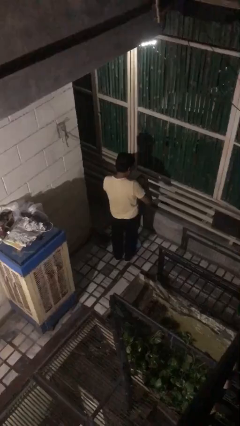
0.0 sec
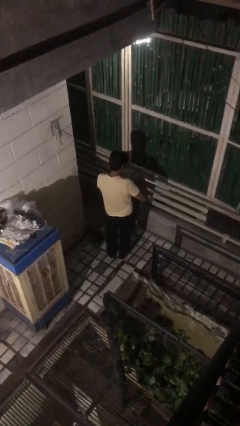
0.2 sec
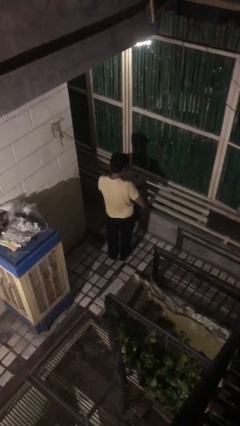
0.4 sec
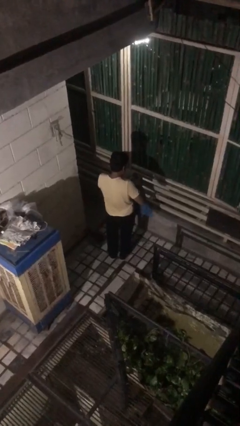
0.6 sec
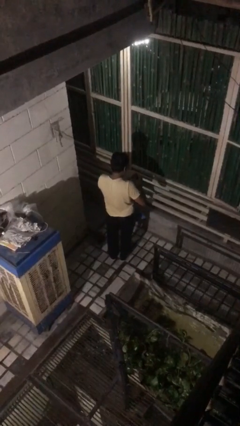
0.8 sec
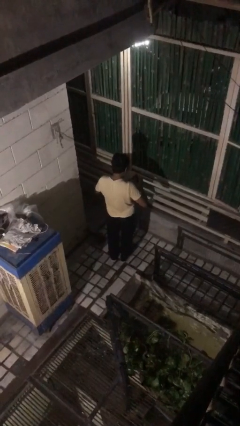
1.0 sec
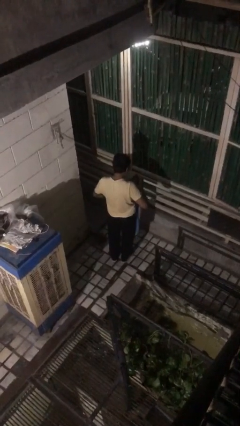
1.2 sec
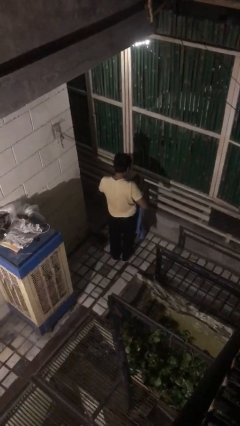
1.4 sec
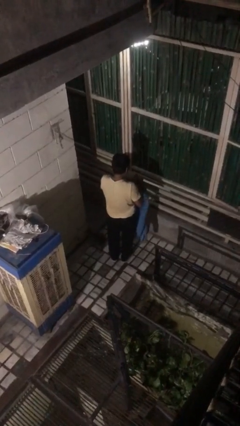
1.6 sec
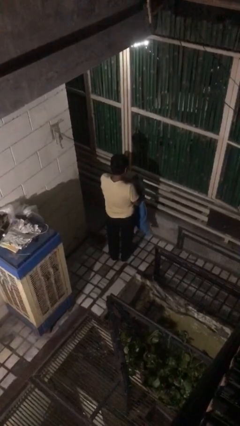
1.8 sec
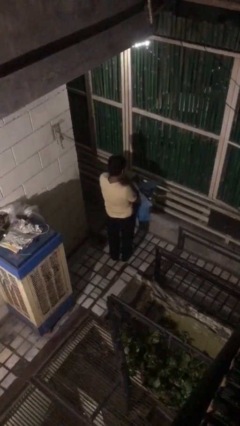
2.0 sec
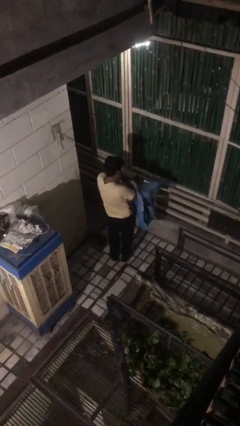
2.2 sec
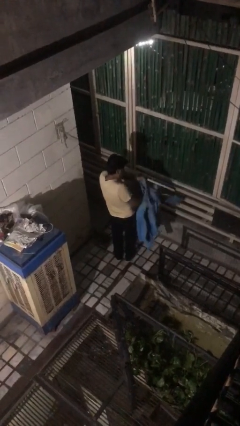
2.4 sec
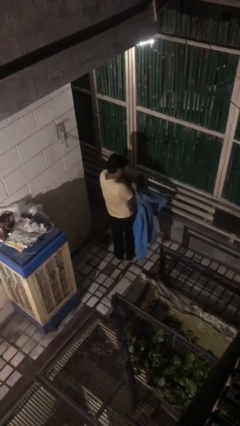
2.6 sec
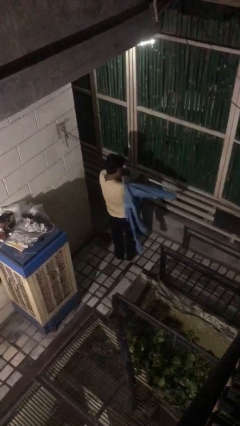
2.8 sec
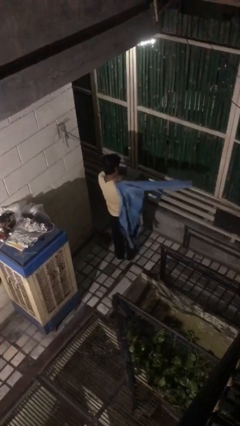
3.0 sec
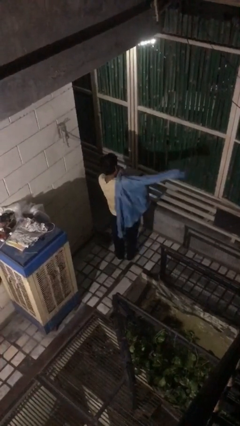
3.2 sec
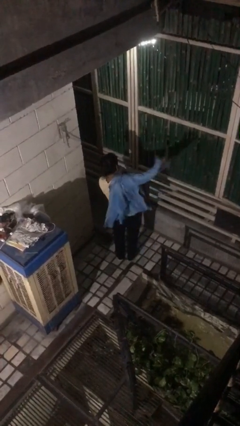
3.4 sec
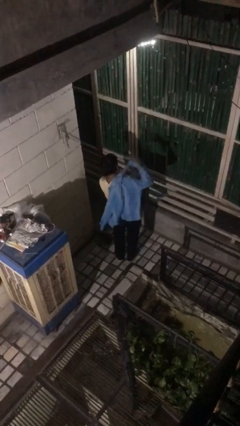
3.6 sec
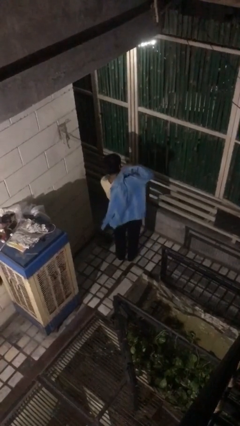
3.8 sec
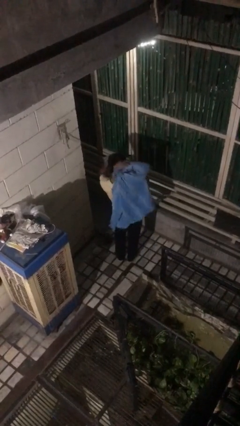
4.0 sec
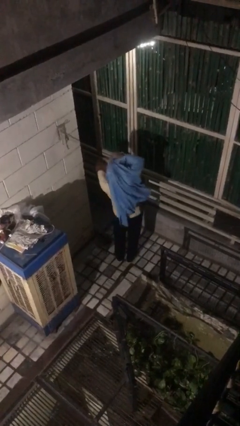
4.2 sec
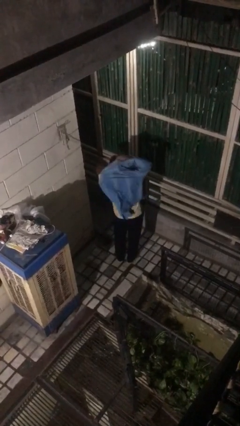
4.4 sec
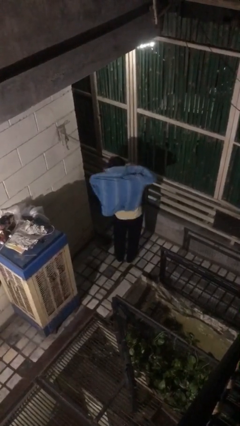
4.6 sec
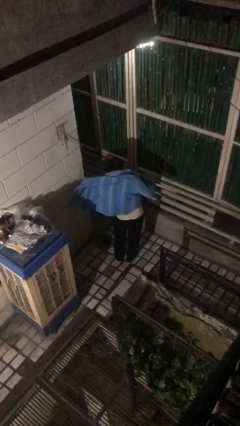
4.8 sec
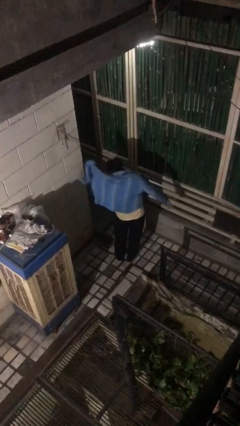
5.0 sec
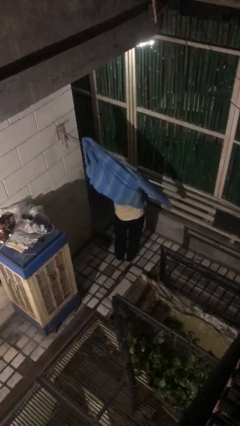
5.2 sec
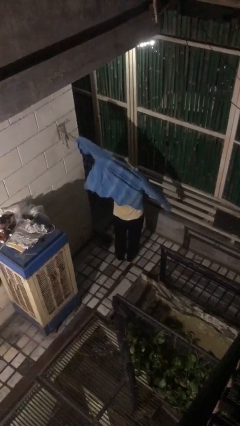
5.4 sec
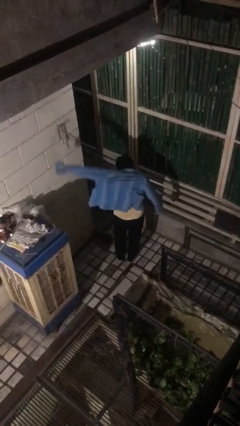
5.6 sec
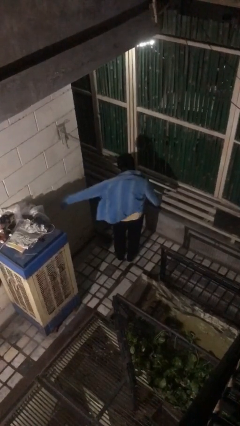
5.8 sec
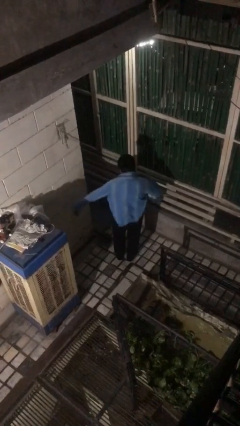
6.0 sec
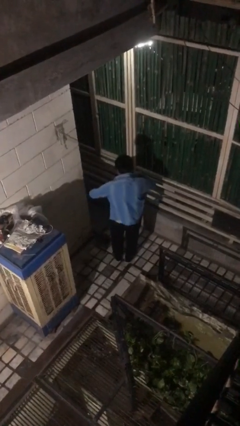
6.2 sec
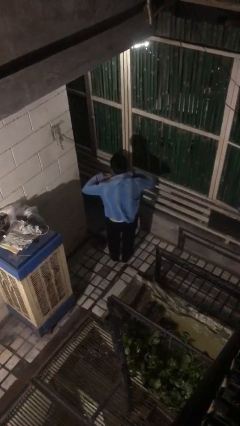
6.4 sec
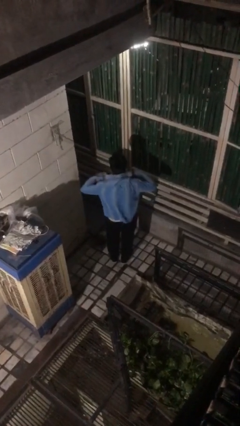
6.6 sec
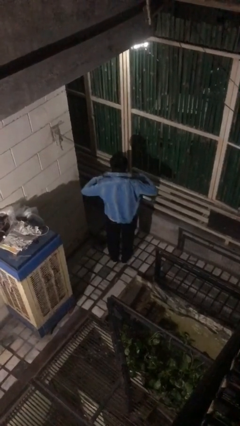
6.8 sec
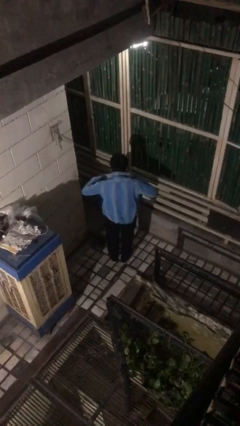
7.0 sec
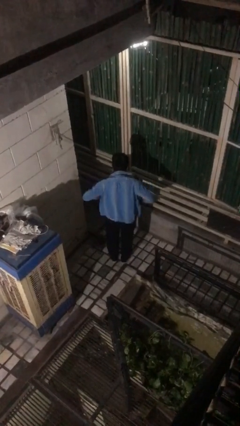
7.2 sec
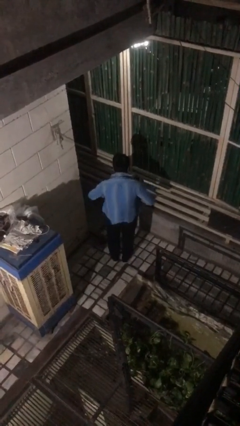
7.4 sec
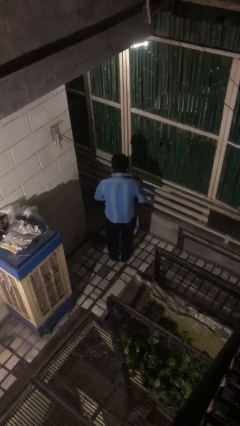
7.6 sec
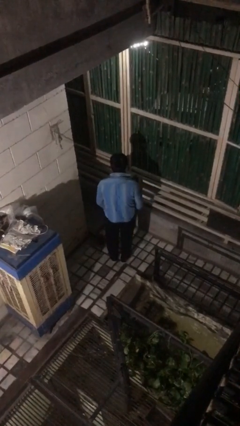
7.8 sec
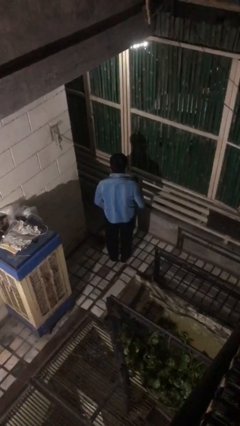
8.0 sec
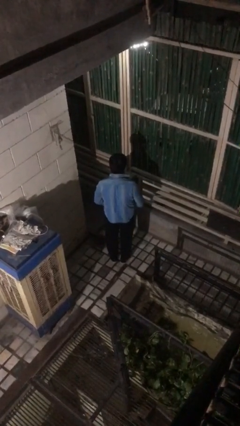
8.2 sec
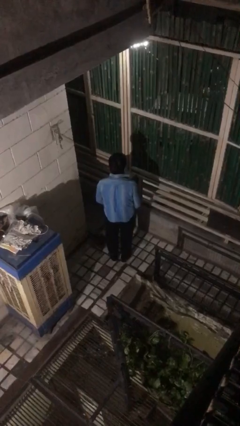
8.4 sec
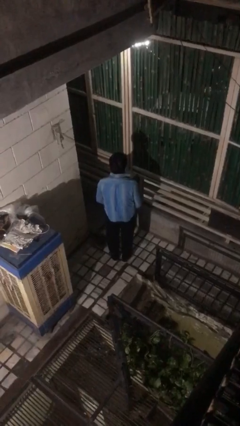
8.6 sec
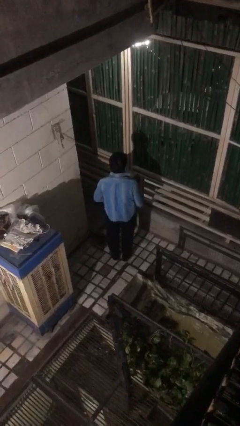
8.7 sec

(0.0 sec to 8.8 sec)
person puts on shirt

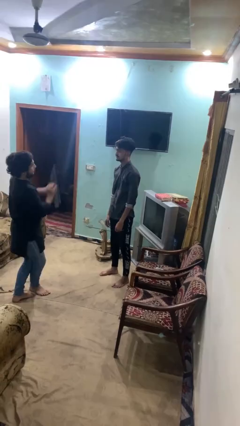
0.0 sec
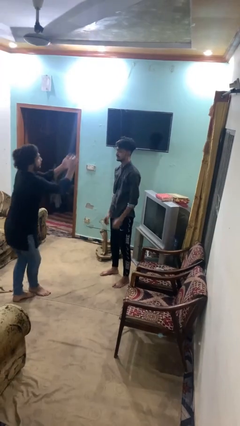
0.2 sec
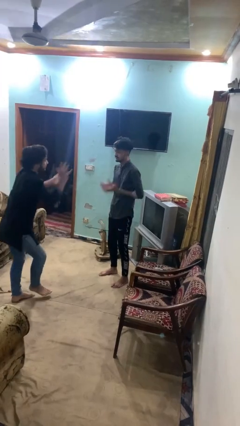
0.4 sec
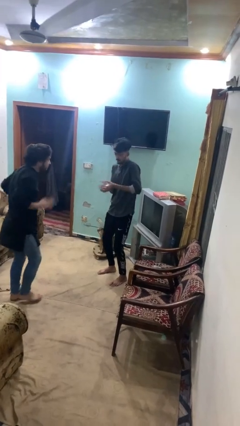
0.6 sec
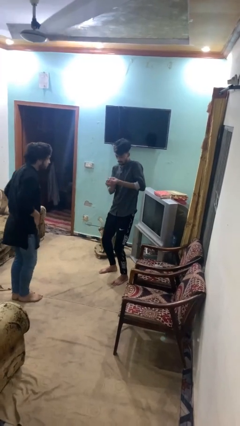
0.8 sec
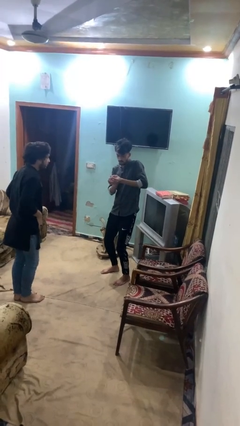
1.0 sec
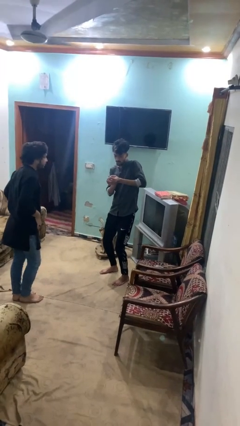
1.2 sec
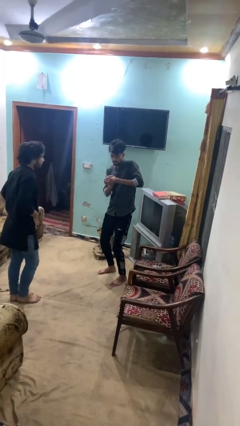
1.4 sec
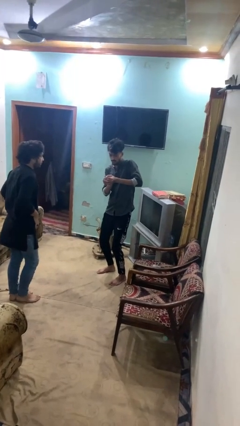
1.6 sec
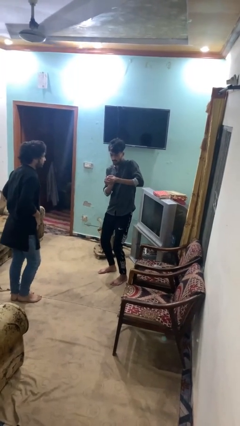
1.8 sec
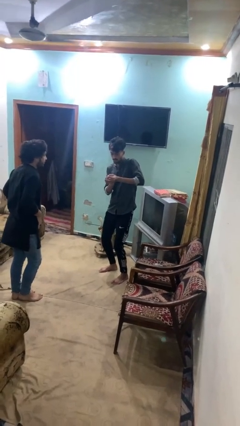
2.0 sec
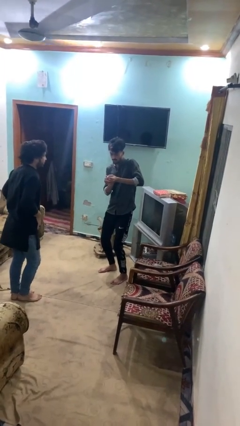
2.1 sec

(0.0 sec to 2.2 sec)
person catches object from person

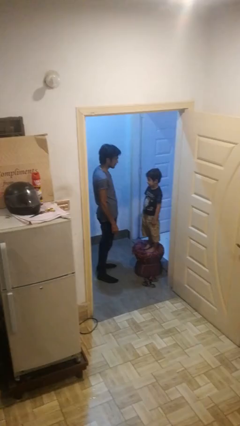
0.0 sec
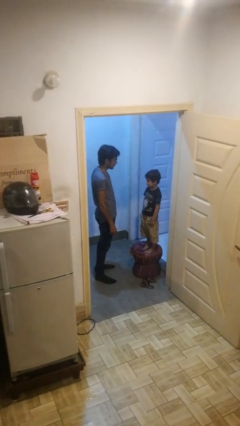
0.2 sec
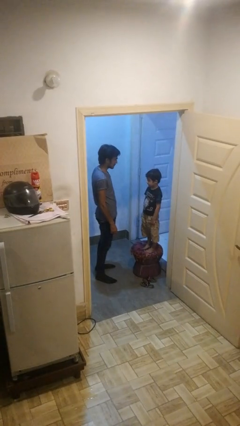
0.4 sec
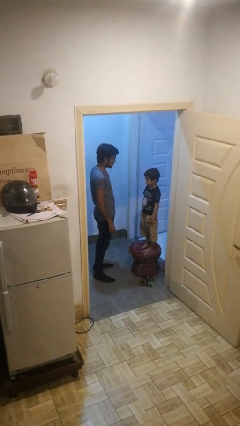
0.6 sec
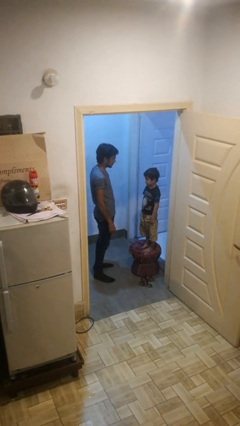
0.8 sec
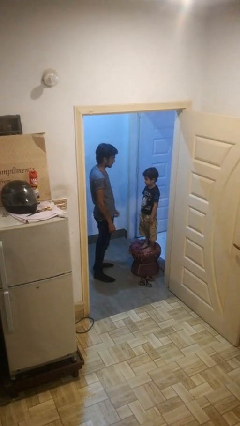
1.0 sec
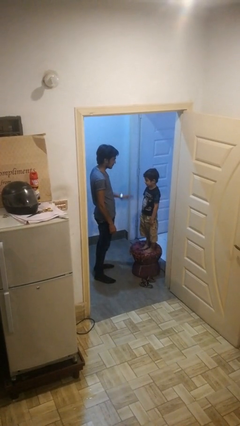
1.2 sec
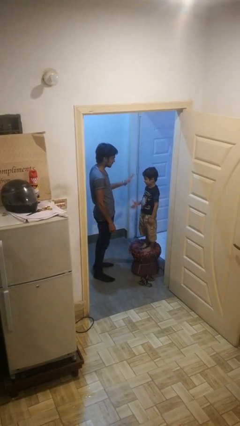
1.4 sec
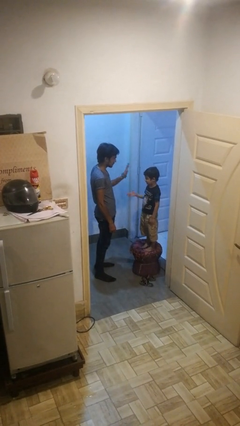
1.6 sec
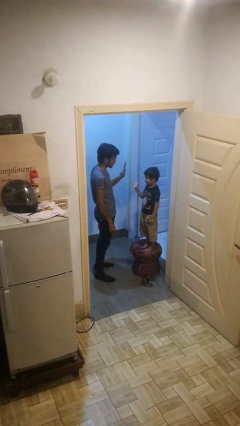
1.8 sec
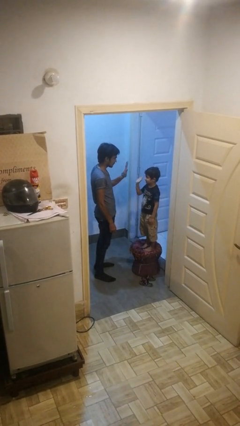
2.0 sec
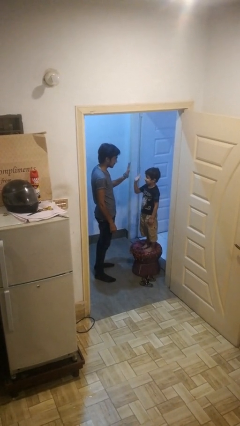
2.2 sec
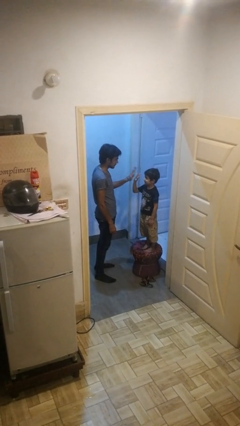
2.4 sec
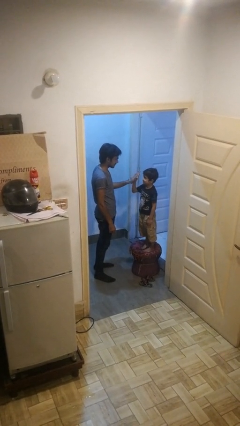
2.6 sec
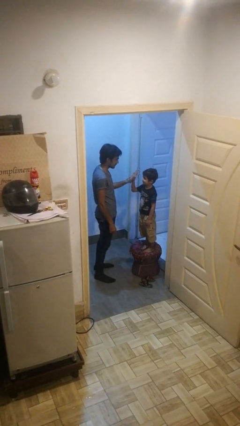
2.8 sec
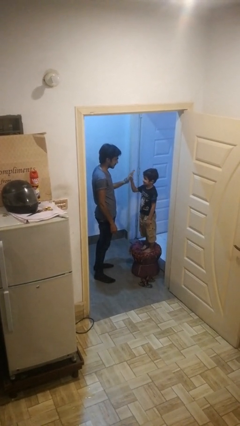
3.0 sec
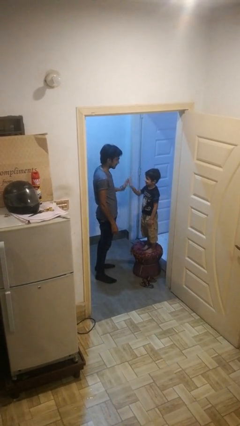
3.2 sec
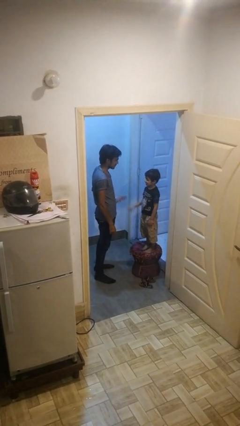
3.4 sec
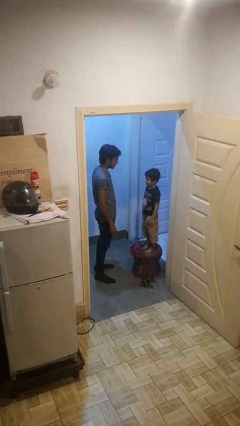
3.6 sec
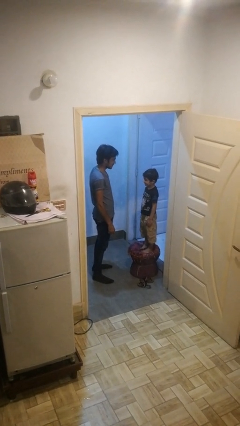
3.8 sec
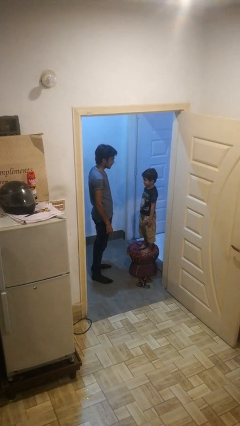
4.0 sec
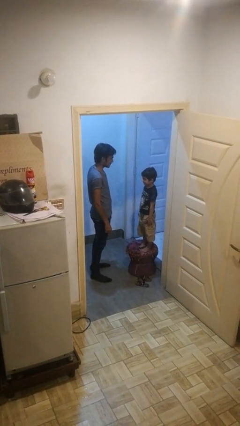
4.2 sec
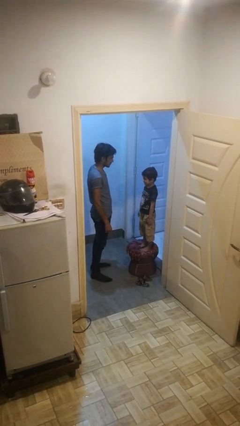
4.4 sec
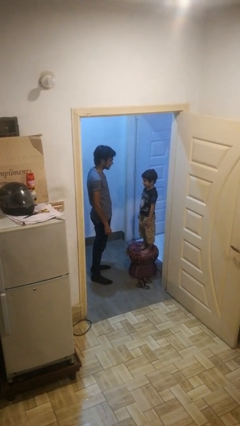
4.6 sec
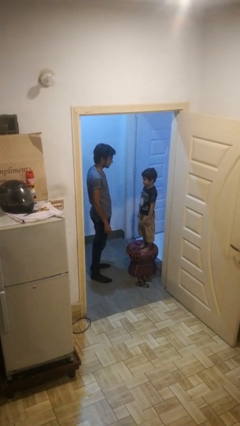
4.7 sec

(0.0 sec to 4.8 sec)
person highfives hand

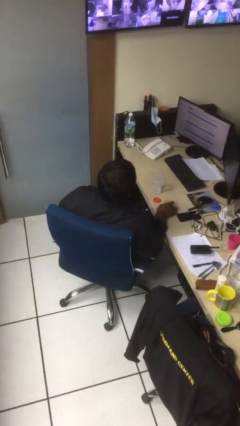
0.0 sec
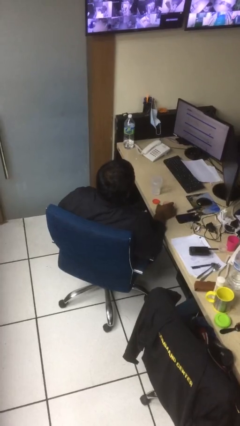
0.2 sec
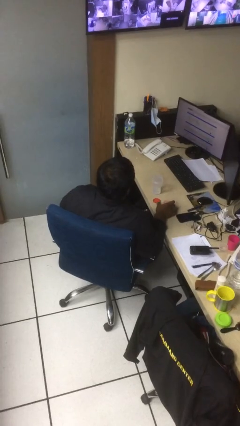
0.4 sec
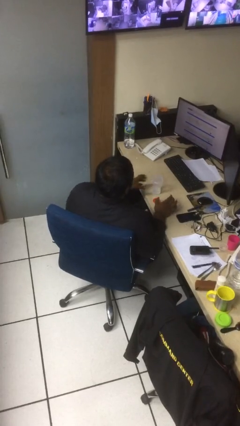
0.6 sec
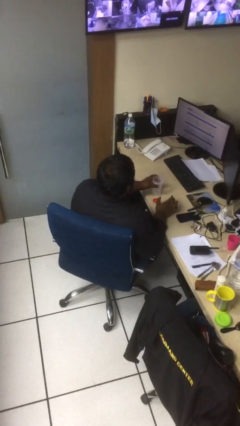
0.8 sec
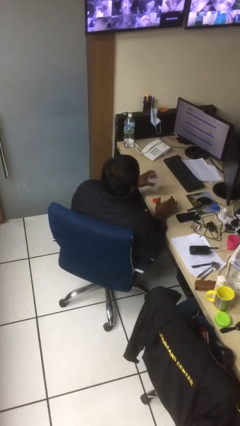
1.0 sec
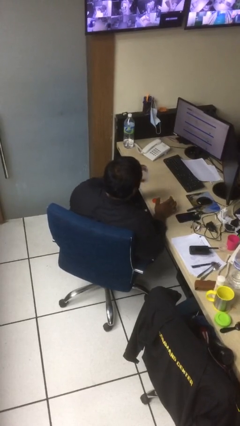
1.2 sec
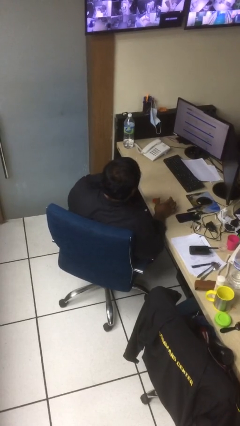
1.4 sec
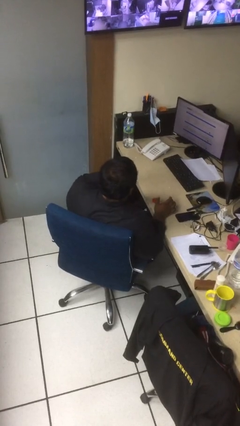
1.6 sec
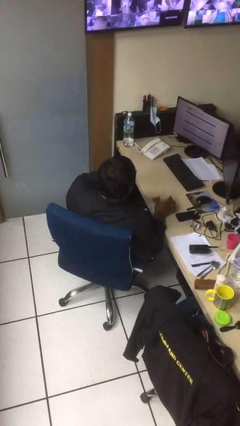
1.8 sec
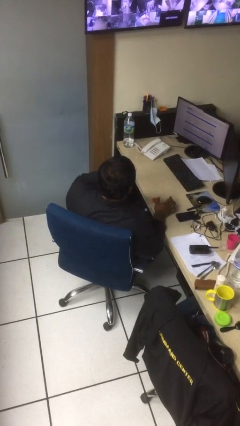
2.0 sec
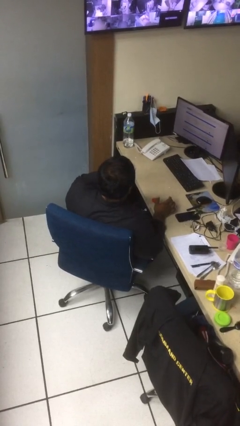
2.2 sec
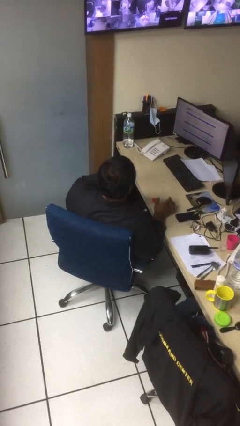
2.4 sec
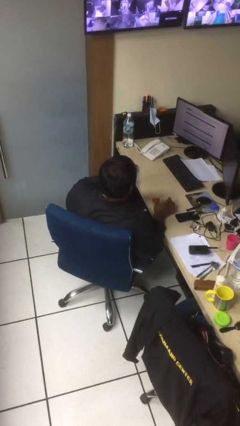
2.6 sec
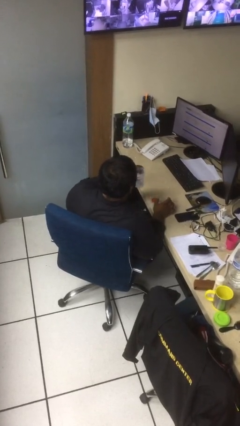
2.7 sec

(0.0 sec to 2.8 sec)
person drinks from cup
